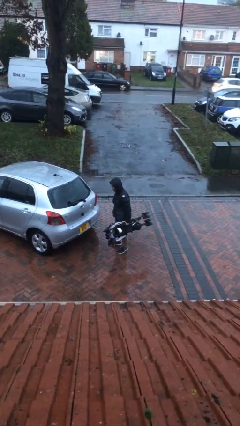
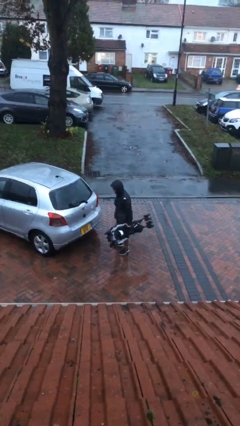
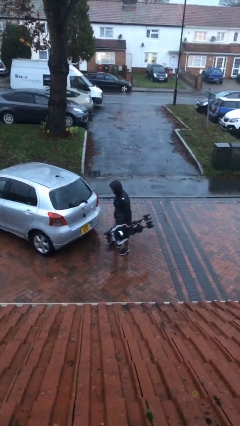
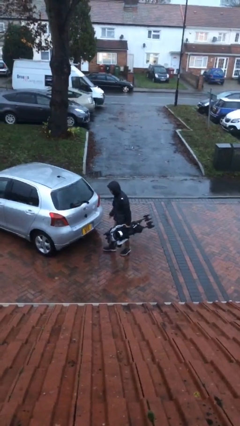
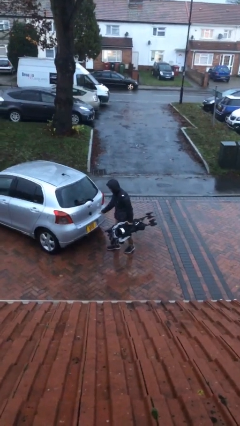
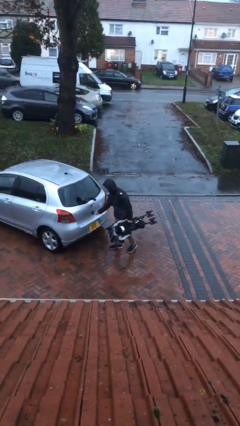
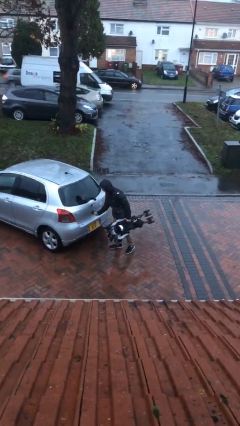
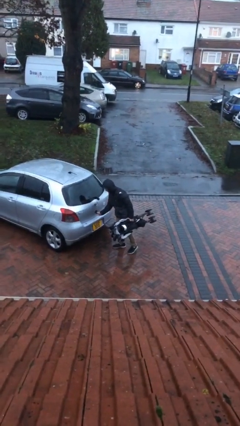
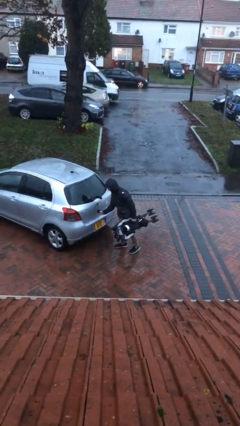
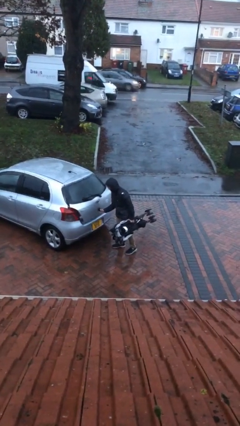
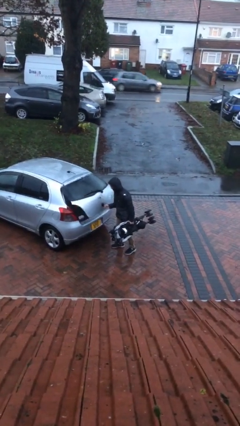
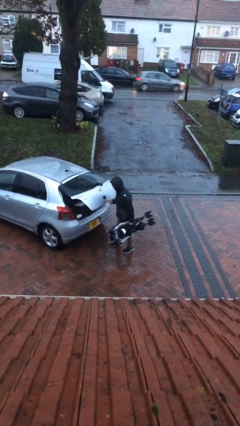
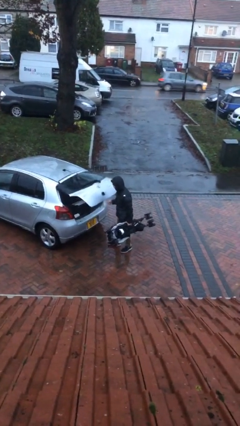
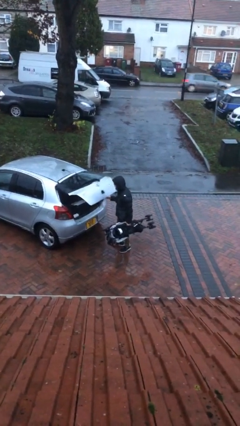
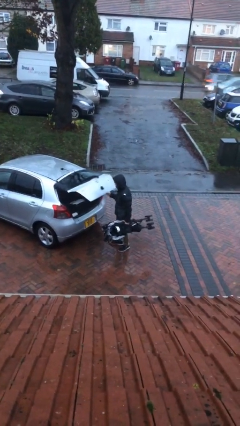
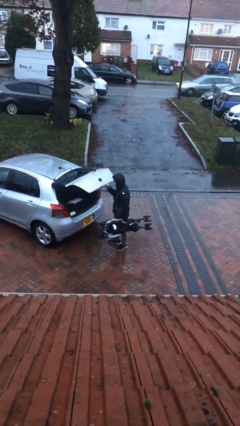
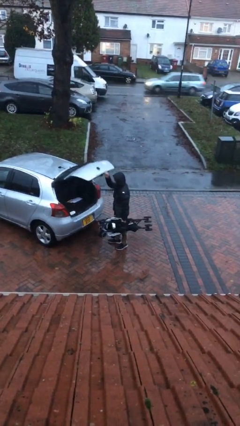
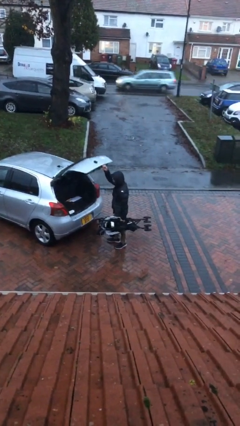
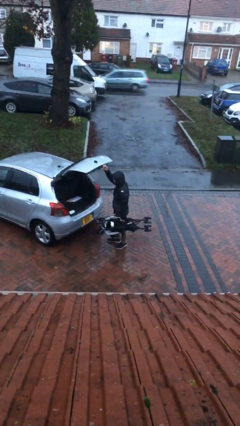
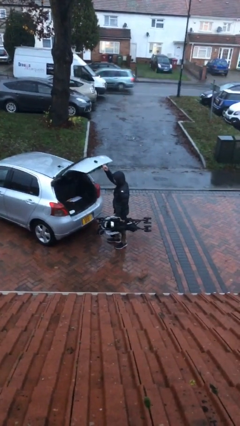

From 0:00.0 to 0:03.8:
person opens car trunk

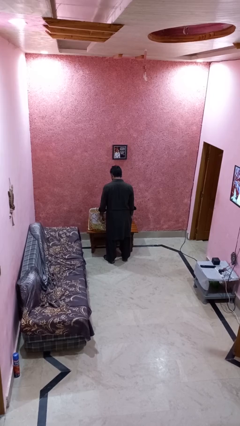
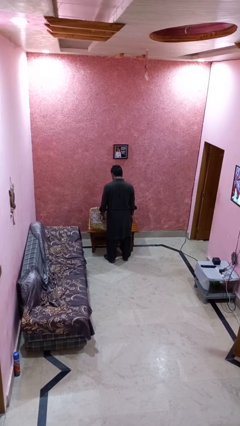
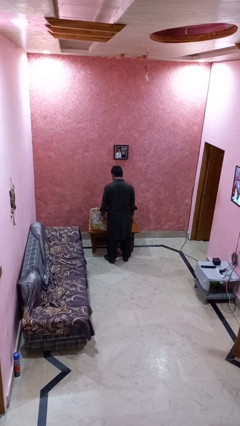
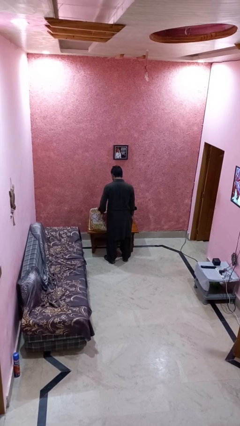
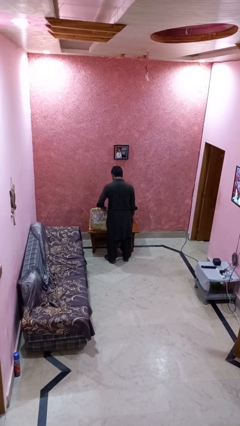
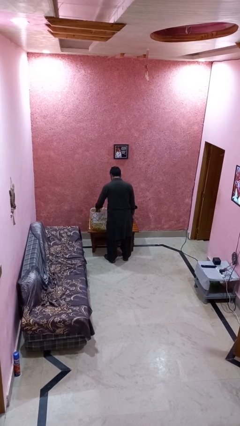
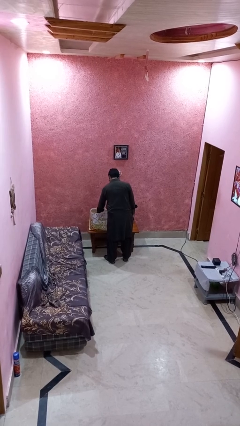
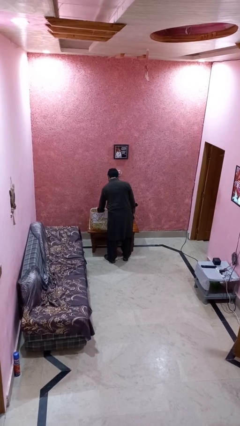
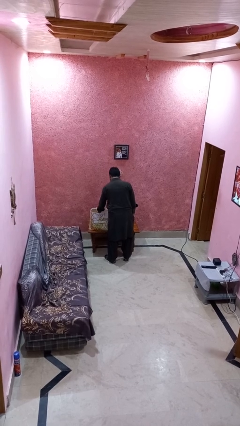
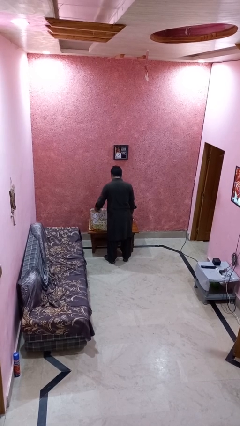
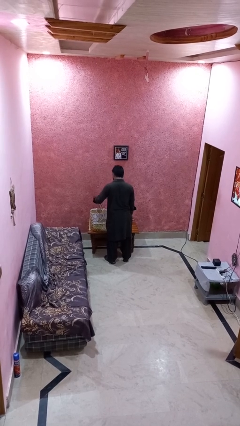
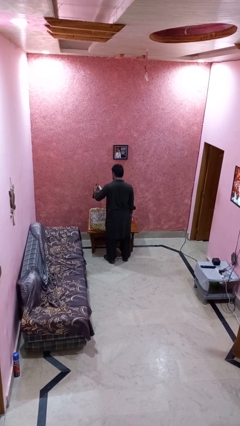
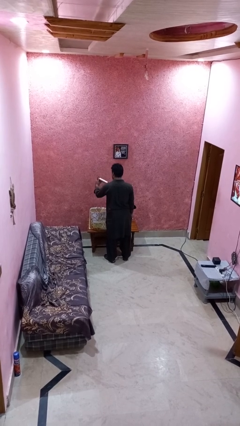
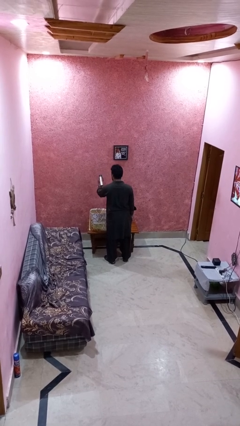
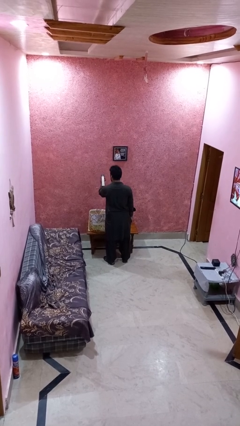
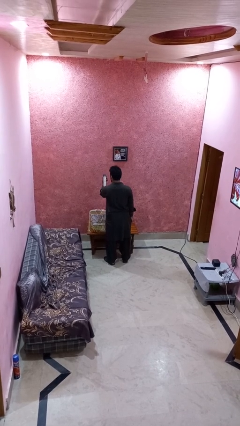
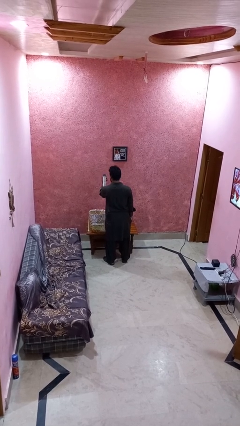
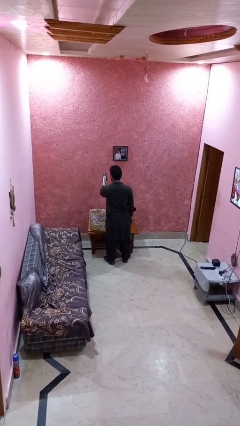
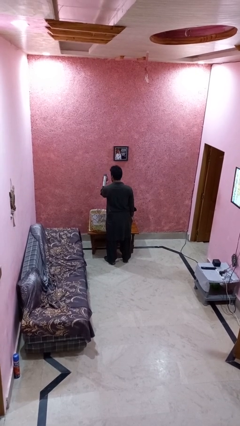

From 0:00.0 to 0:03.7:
person takes object from bag

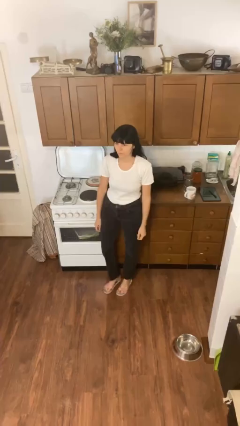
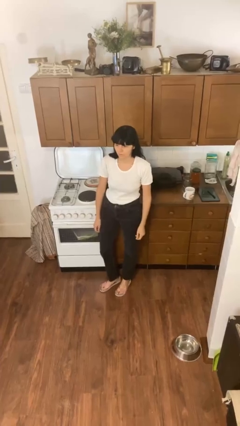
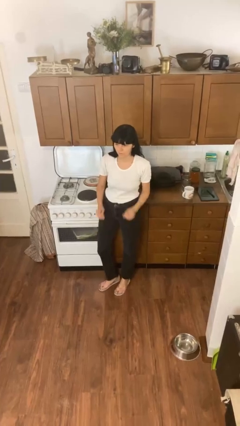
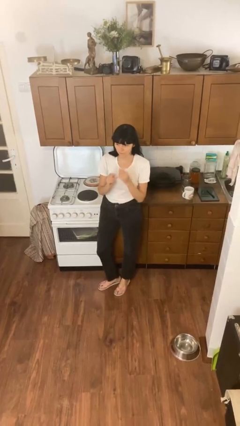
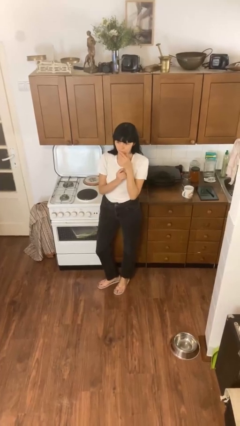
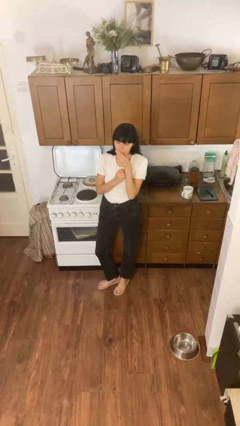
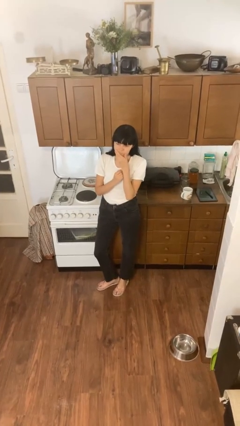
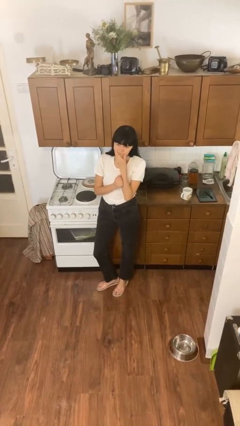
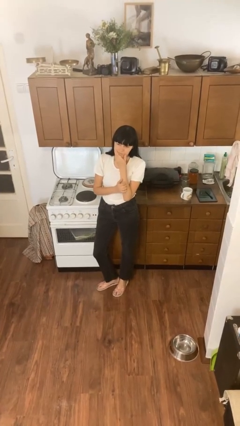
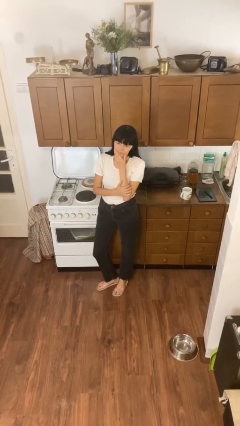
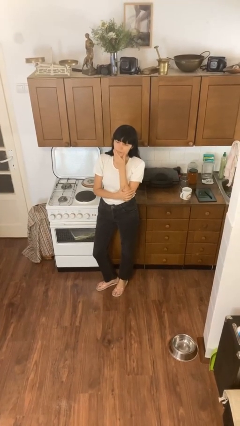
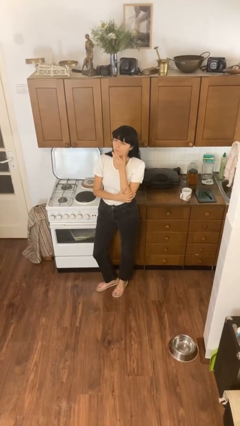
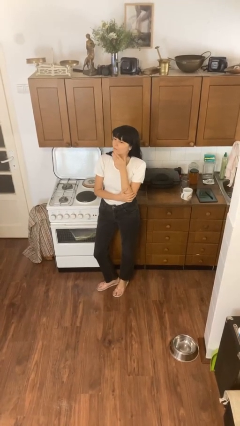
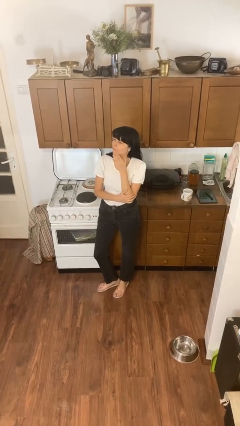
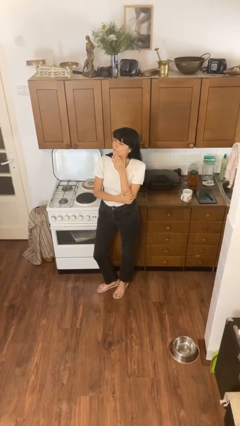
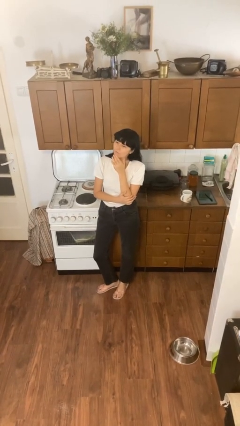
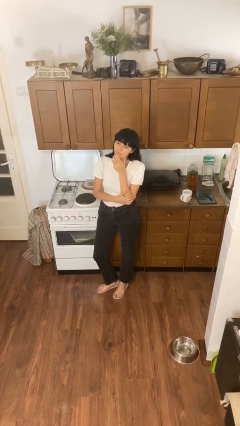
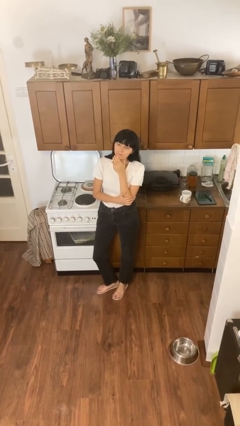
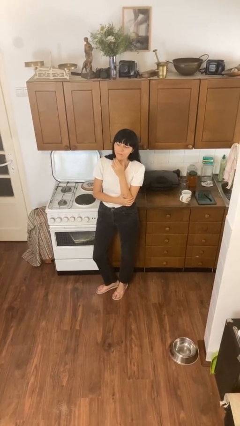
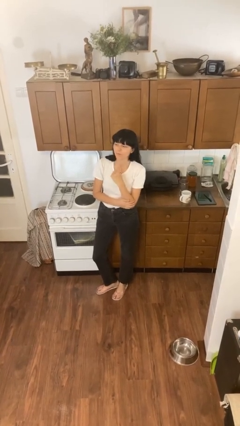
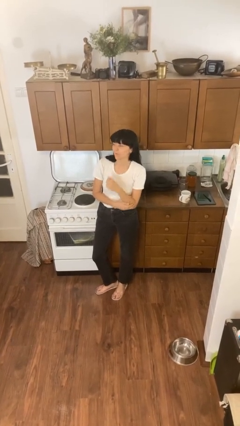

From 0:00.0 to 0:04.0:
person strokes chin

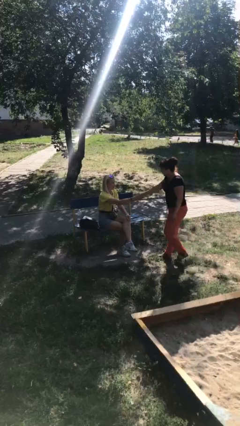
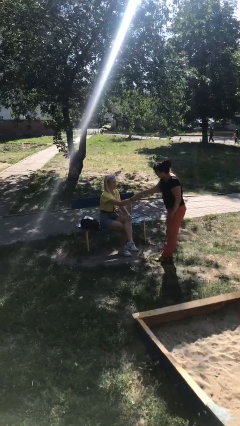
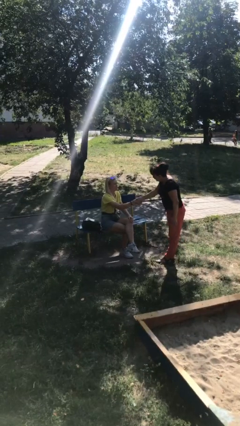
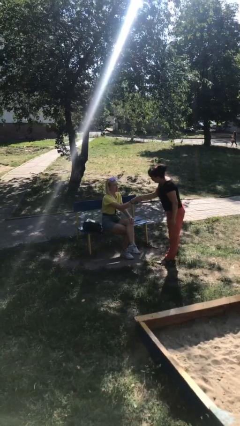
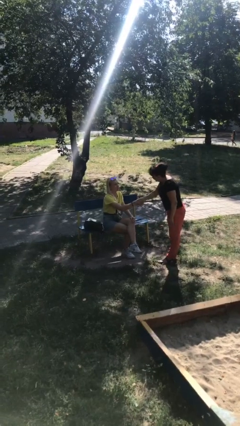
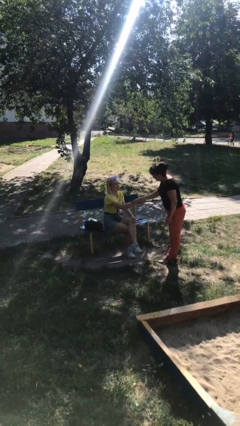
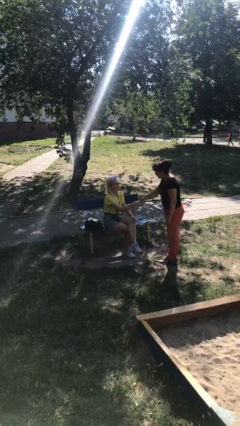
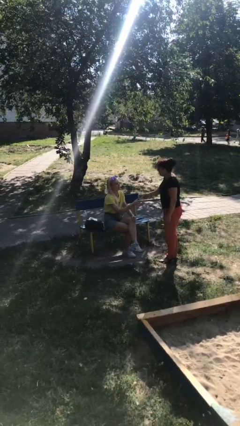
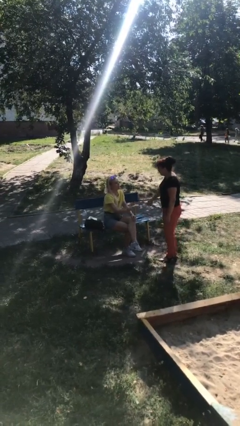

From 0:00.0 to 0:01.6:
person shakes hand

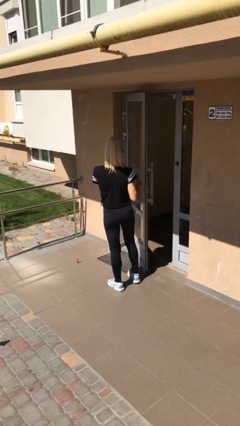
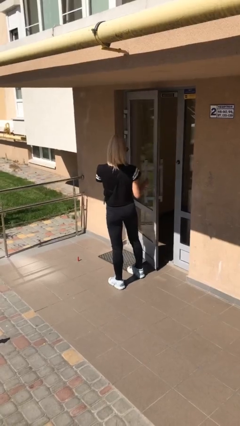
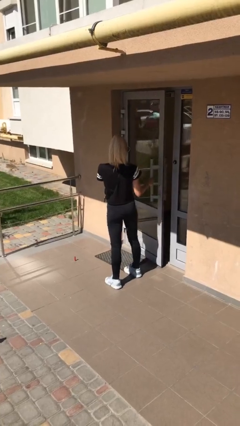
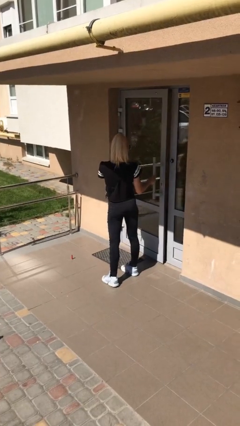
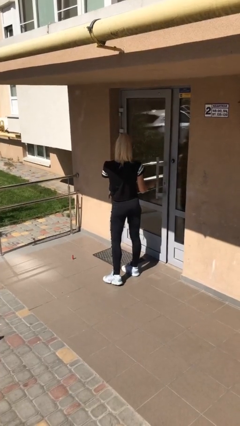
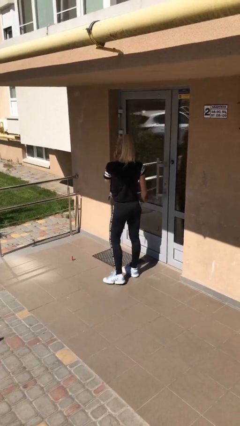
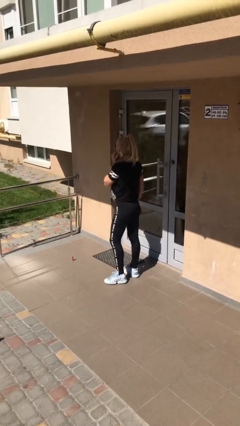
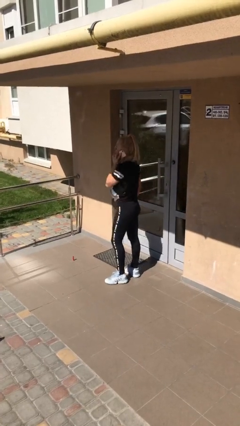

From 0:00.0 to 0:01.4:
person closes facility door

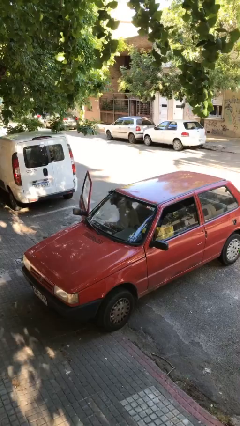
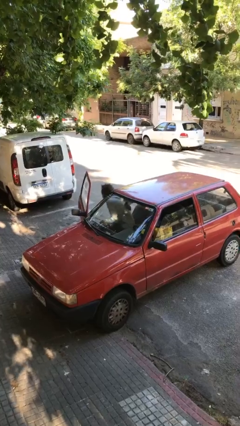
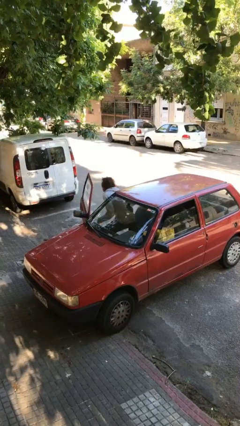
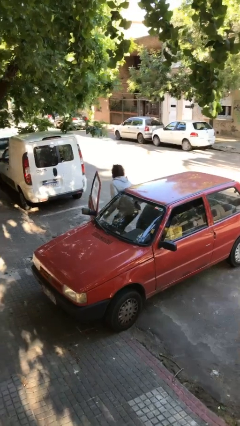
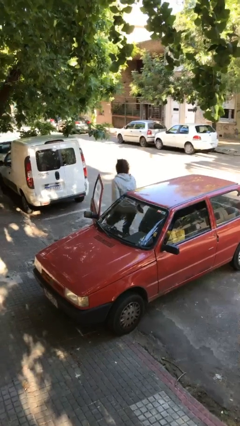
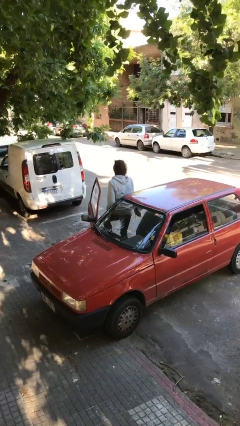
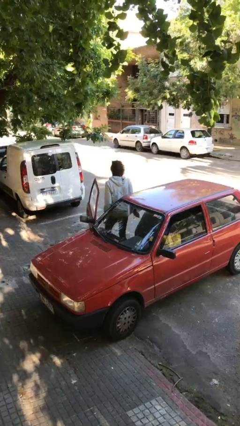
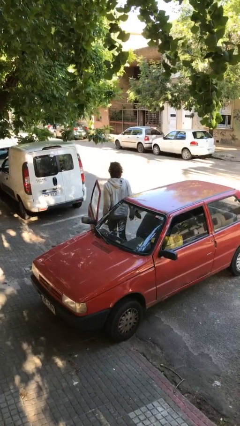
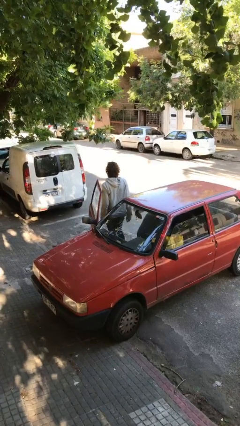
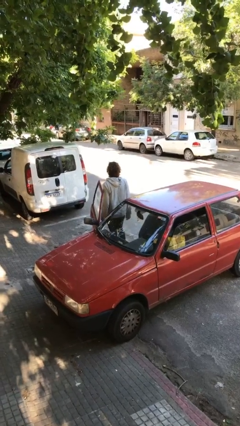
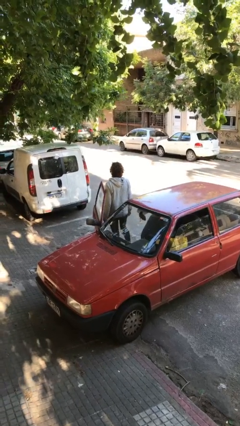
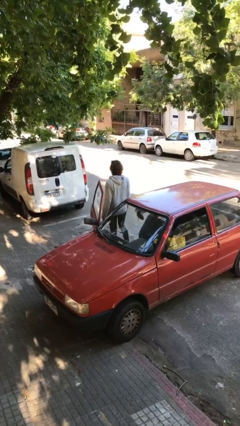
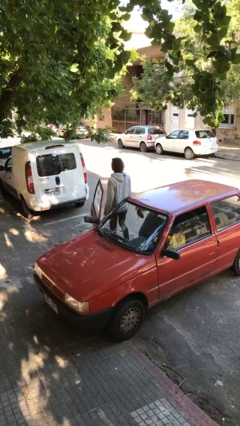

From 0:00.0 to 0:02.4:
person exits car

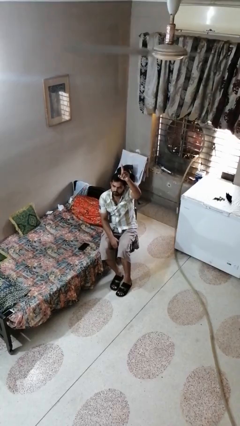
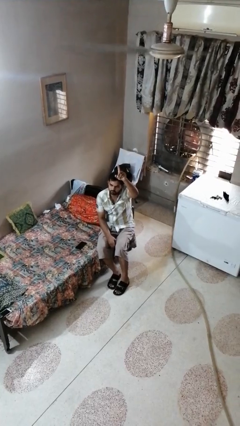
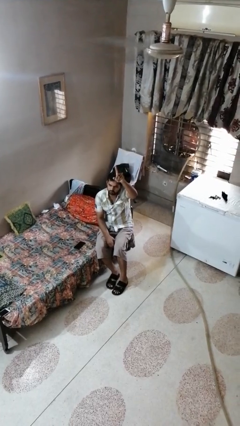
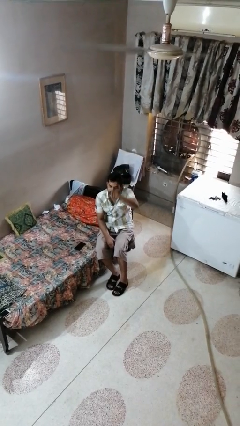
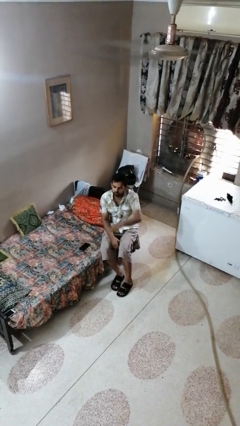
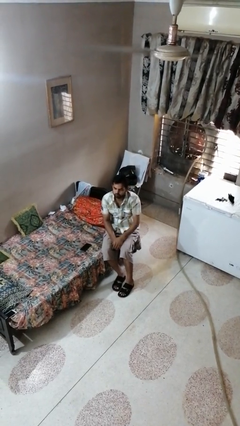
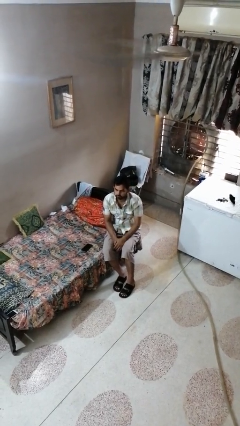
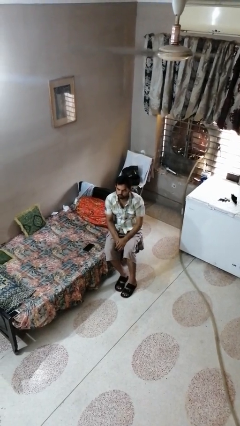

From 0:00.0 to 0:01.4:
person gestures lower hand
